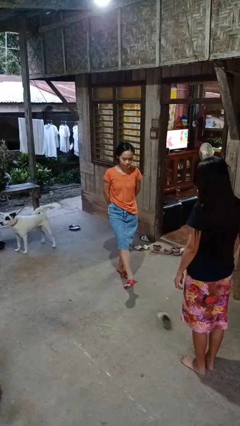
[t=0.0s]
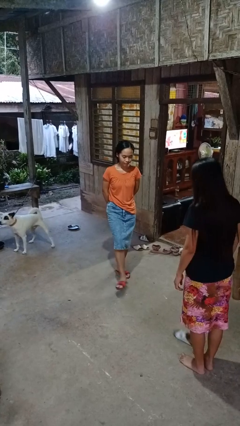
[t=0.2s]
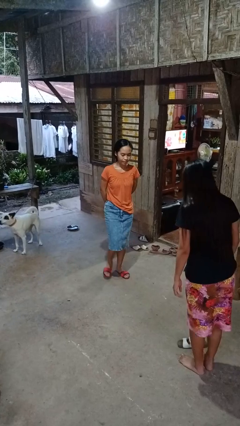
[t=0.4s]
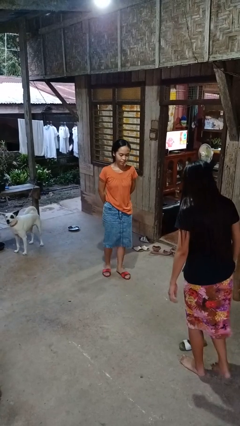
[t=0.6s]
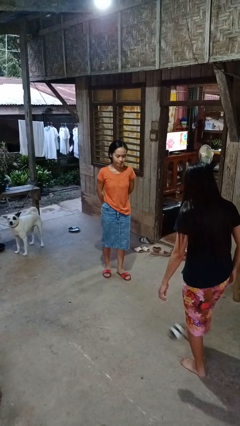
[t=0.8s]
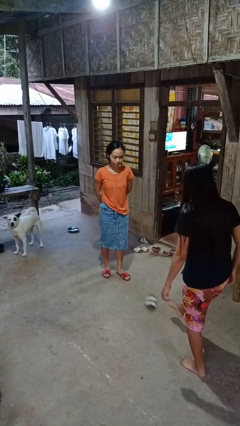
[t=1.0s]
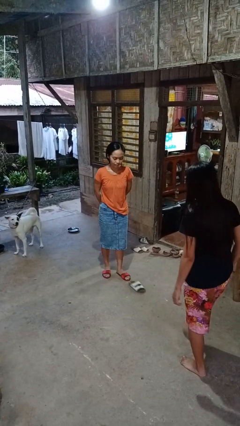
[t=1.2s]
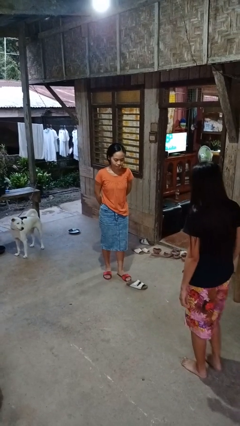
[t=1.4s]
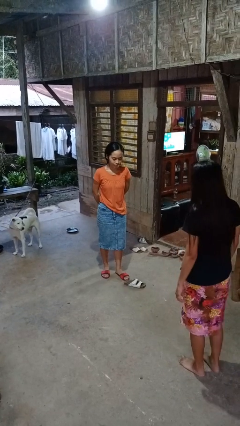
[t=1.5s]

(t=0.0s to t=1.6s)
person kicks object to person

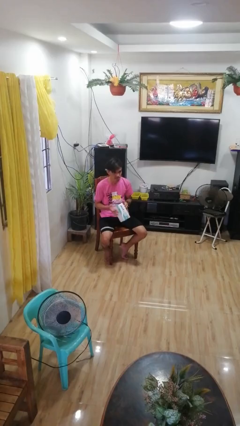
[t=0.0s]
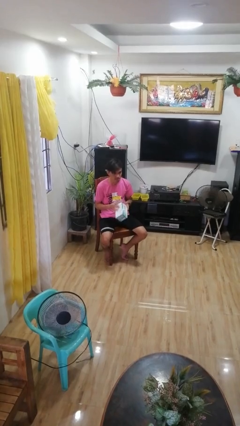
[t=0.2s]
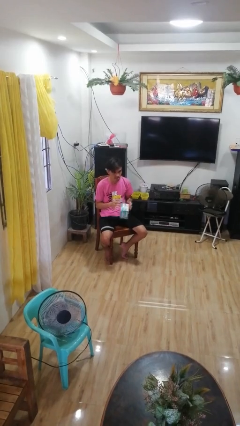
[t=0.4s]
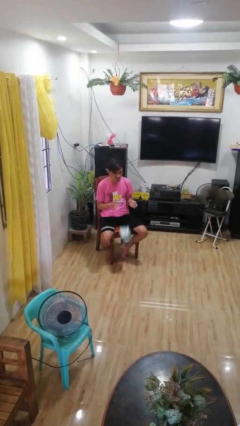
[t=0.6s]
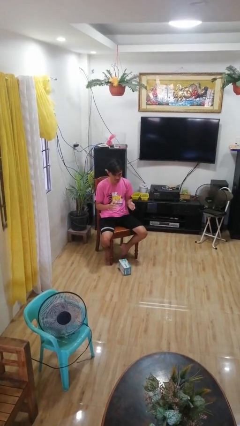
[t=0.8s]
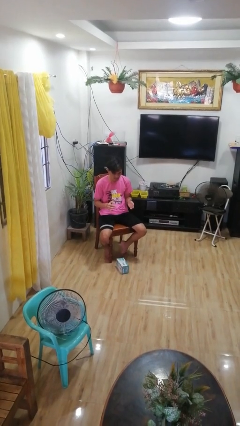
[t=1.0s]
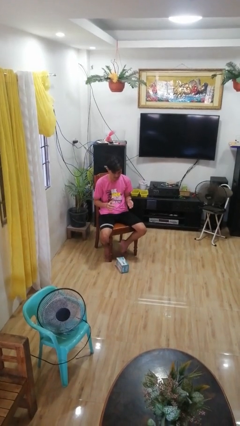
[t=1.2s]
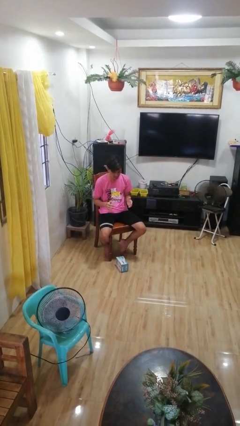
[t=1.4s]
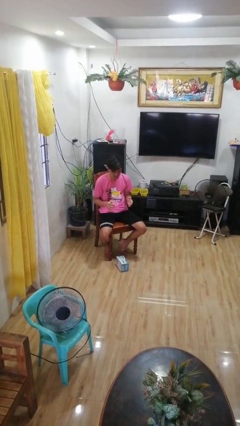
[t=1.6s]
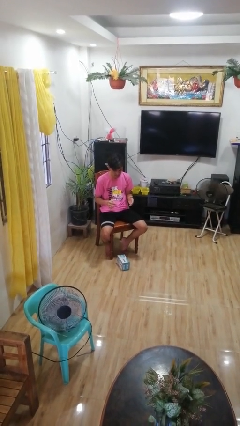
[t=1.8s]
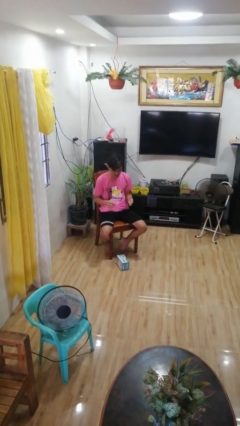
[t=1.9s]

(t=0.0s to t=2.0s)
person drops object

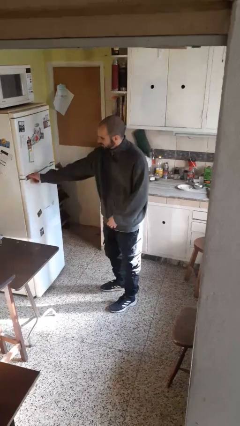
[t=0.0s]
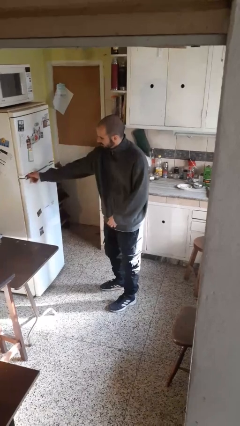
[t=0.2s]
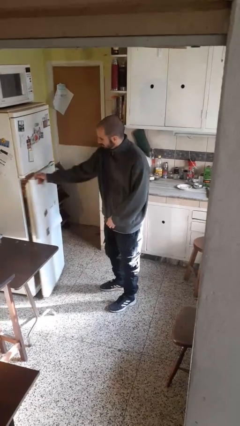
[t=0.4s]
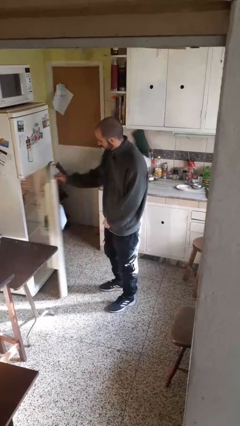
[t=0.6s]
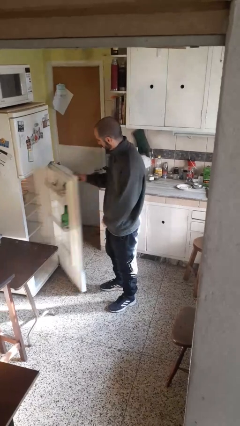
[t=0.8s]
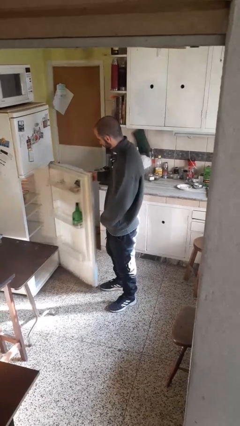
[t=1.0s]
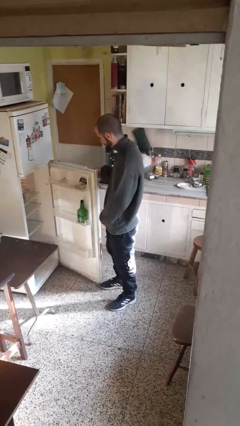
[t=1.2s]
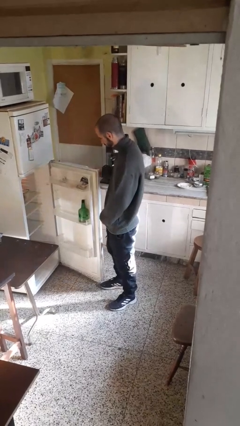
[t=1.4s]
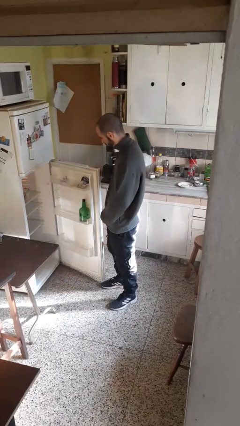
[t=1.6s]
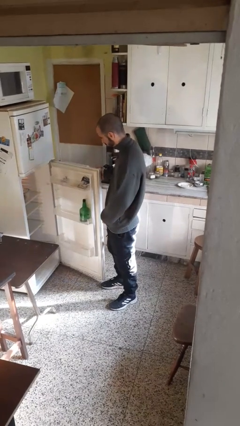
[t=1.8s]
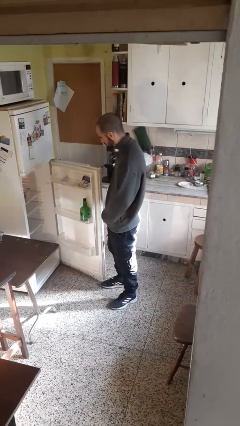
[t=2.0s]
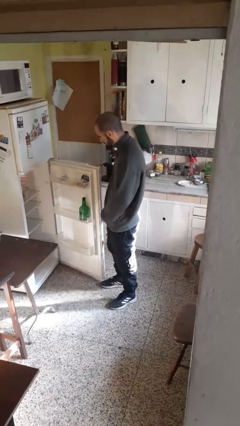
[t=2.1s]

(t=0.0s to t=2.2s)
person opens refrigerator

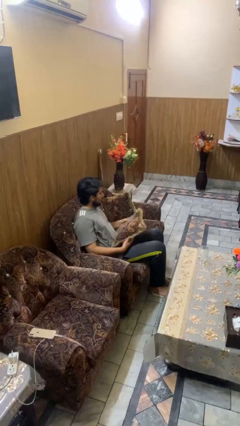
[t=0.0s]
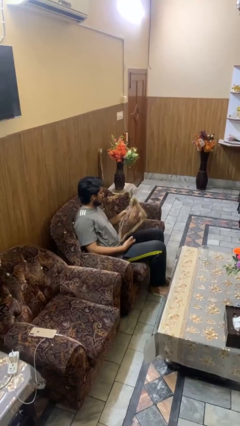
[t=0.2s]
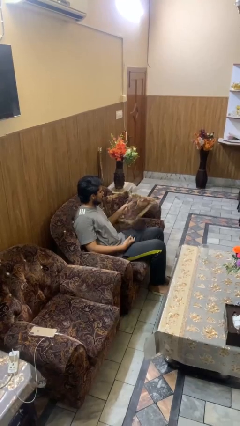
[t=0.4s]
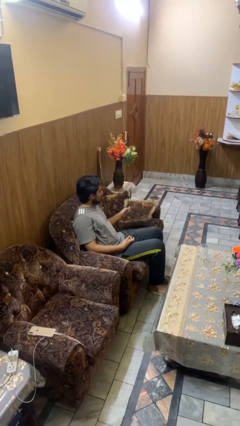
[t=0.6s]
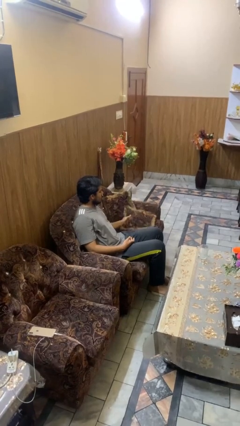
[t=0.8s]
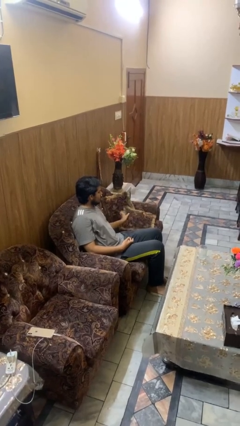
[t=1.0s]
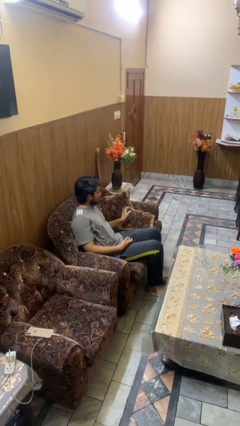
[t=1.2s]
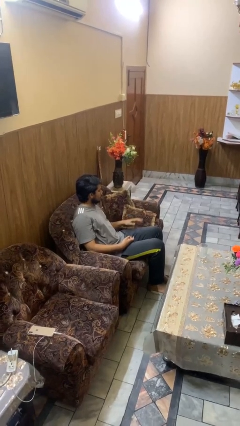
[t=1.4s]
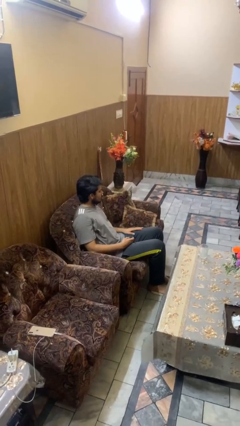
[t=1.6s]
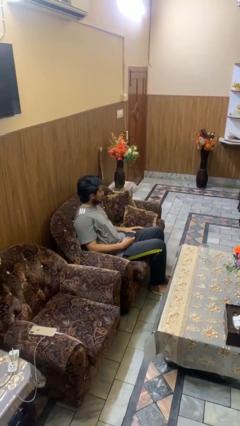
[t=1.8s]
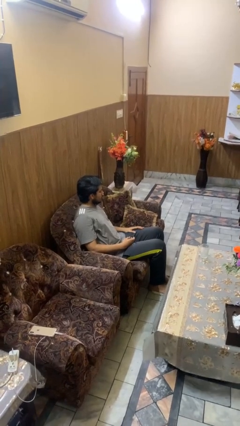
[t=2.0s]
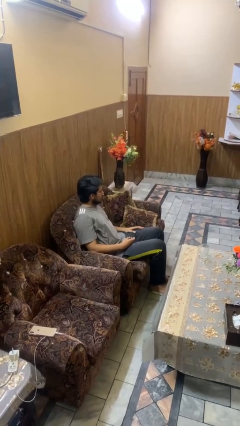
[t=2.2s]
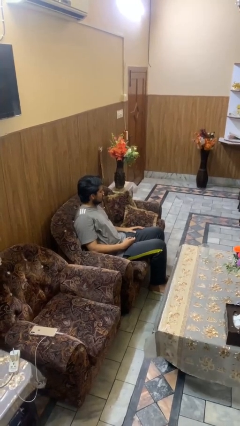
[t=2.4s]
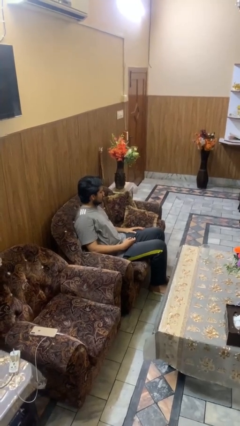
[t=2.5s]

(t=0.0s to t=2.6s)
person puts down object on couch

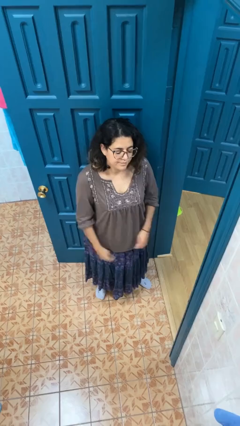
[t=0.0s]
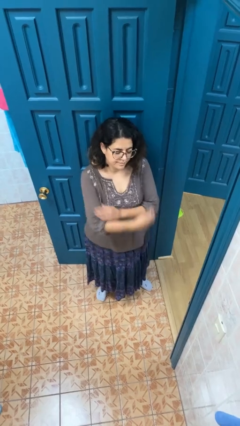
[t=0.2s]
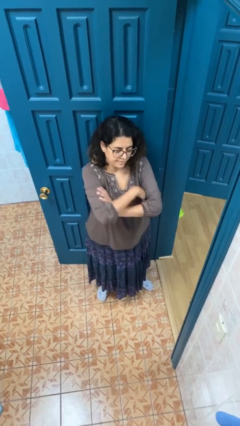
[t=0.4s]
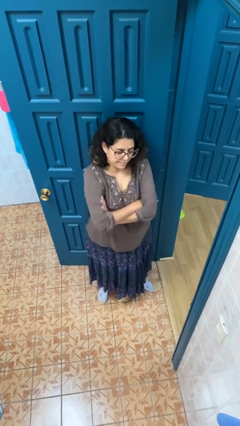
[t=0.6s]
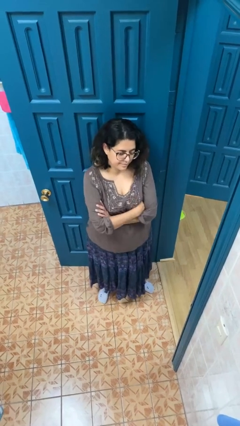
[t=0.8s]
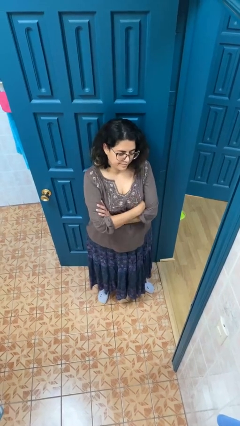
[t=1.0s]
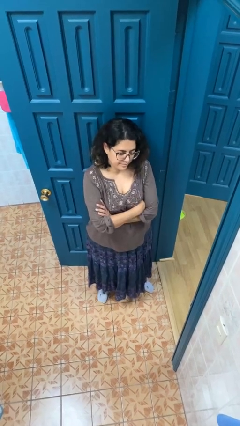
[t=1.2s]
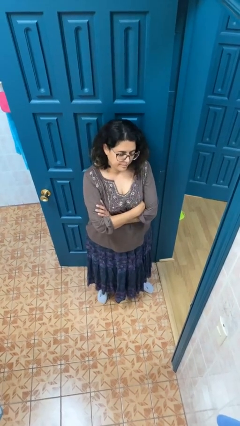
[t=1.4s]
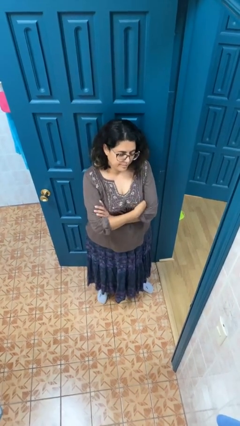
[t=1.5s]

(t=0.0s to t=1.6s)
person crosses arms

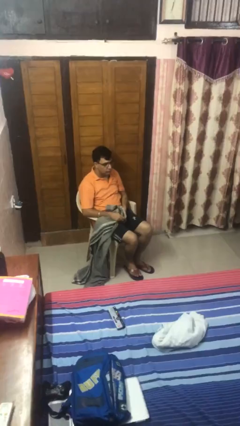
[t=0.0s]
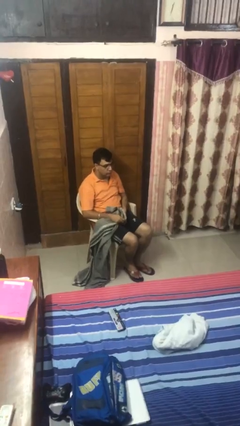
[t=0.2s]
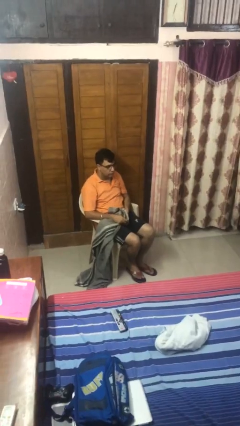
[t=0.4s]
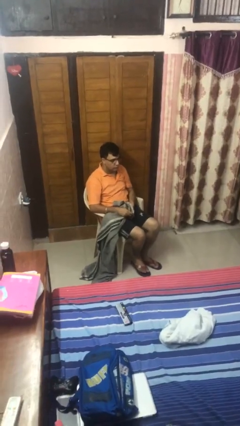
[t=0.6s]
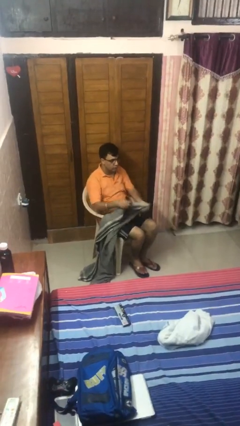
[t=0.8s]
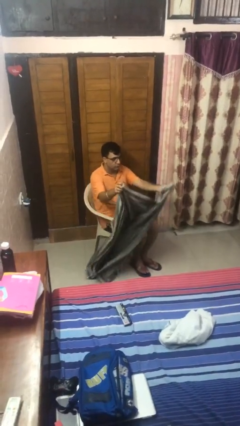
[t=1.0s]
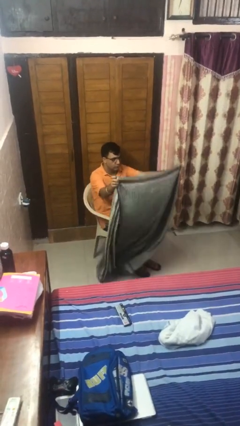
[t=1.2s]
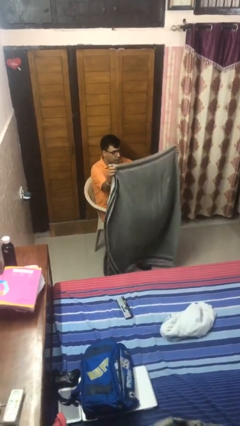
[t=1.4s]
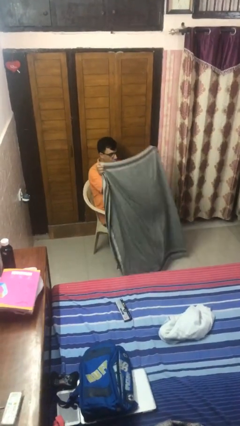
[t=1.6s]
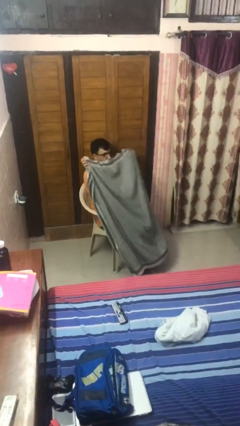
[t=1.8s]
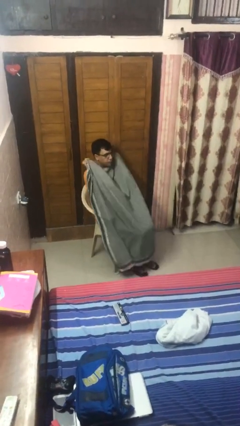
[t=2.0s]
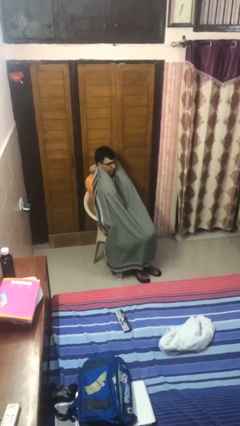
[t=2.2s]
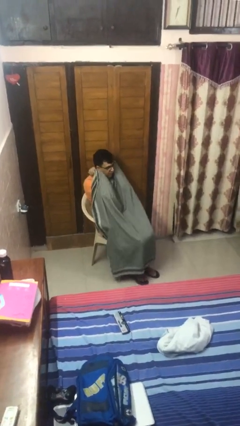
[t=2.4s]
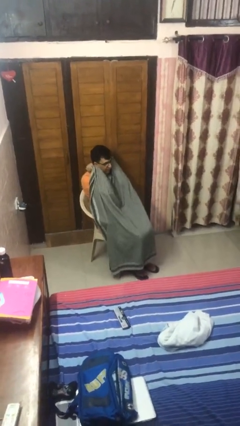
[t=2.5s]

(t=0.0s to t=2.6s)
person covers with blanket

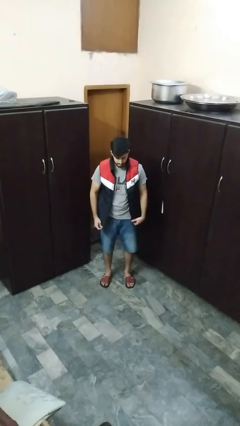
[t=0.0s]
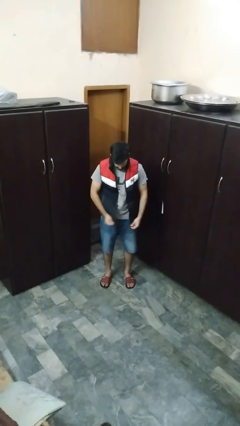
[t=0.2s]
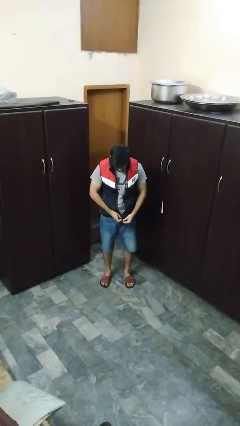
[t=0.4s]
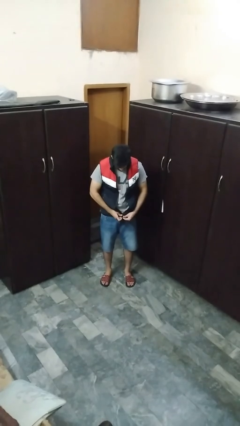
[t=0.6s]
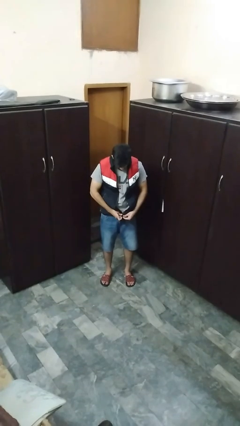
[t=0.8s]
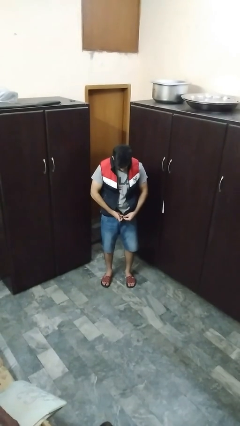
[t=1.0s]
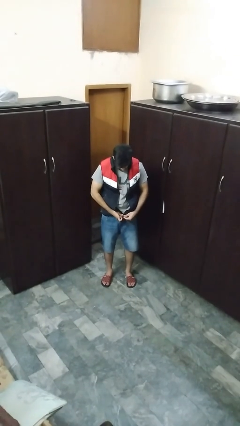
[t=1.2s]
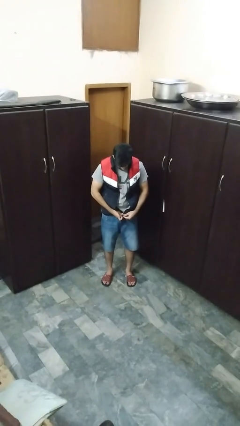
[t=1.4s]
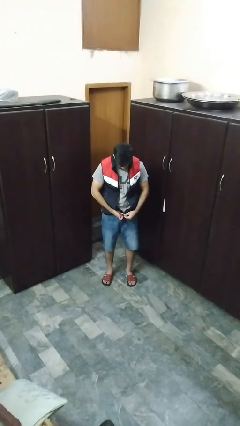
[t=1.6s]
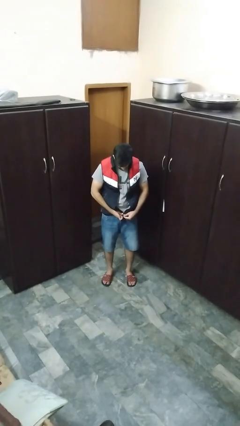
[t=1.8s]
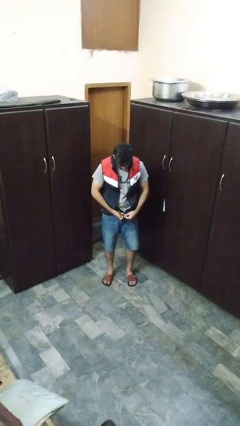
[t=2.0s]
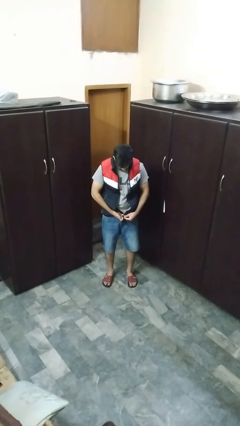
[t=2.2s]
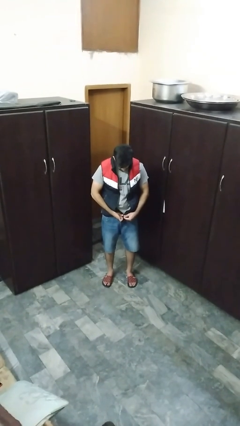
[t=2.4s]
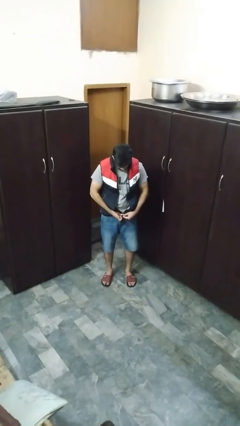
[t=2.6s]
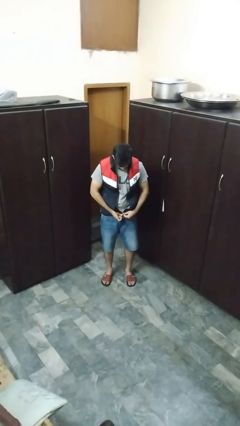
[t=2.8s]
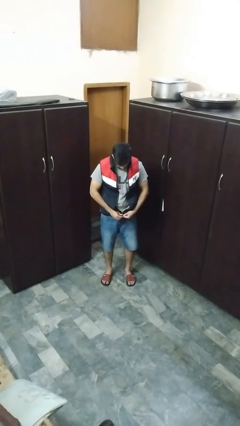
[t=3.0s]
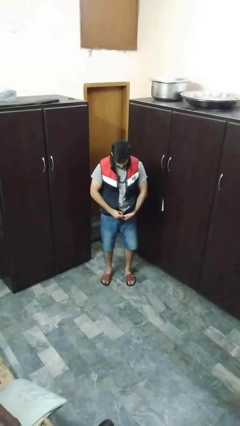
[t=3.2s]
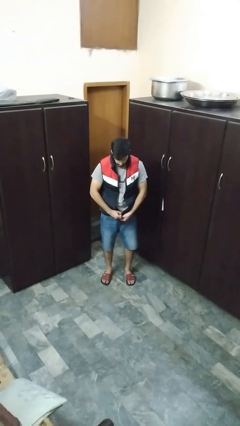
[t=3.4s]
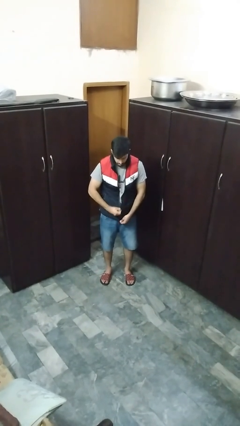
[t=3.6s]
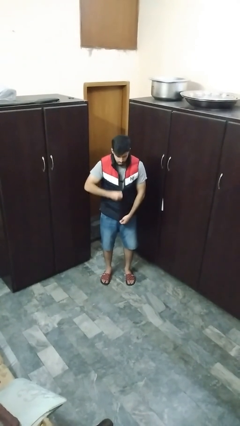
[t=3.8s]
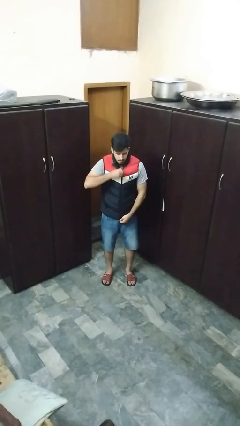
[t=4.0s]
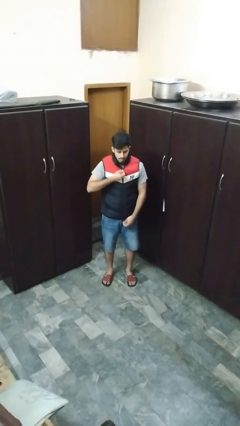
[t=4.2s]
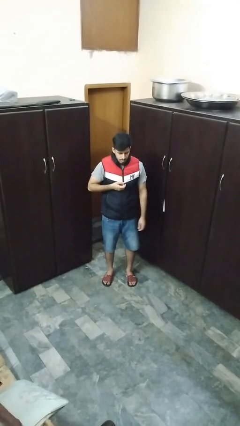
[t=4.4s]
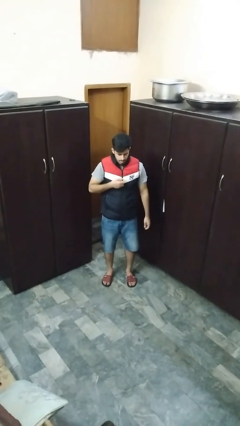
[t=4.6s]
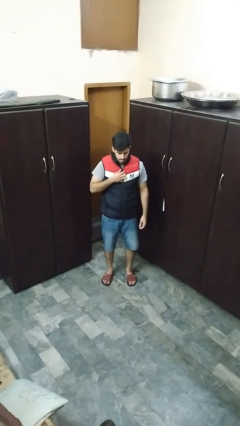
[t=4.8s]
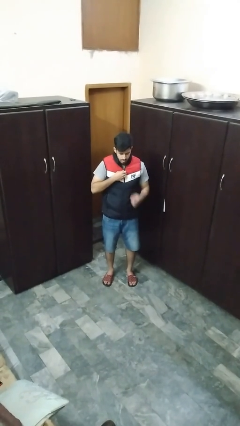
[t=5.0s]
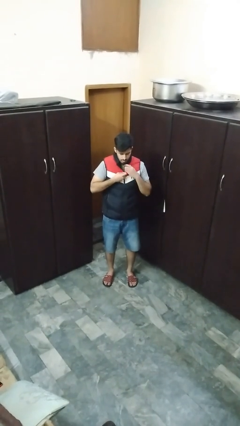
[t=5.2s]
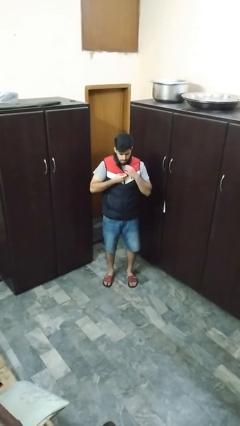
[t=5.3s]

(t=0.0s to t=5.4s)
person zips up jacket
